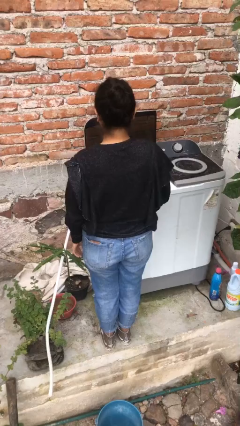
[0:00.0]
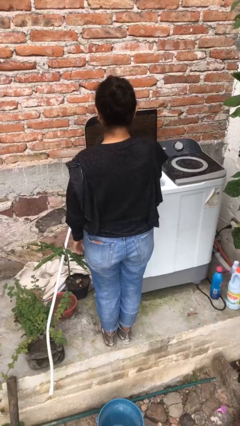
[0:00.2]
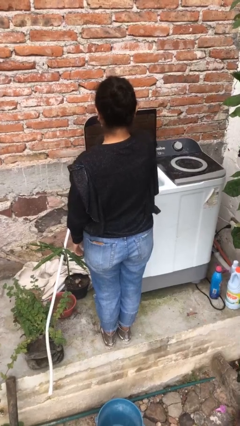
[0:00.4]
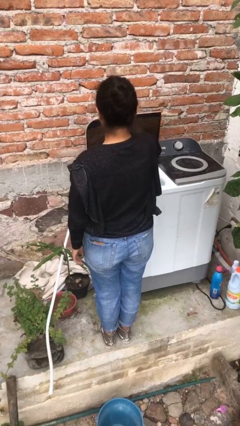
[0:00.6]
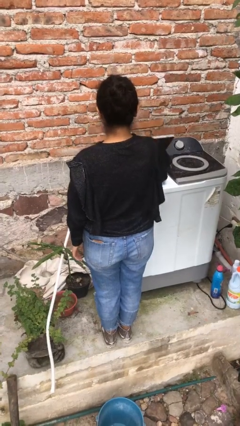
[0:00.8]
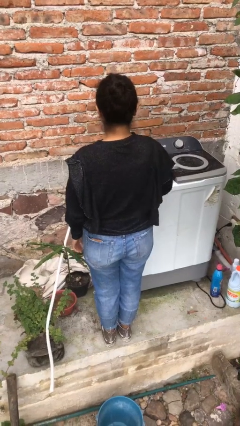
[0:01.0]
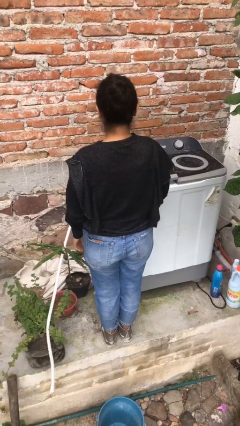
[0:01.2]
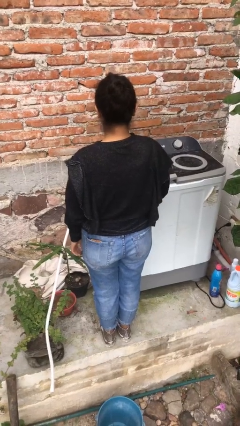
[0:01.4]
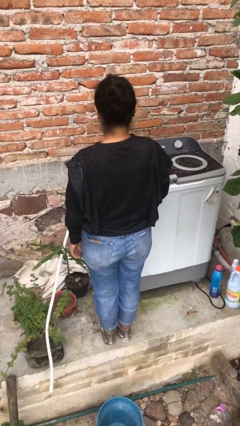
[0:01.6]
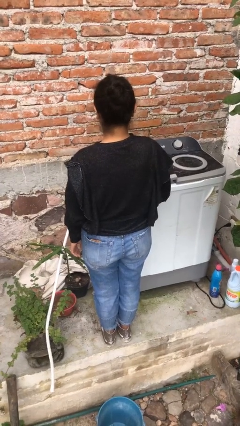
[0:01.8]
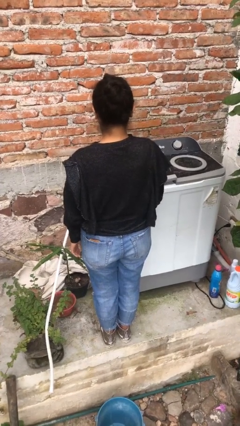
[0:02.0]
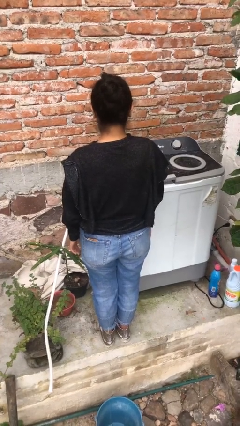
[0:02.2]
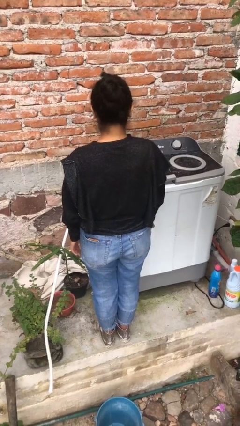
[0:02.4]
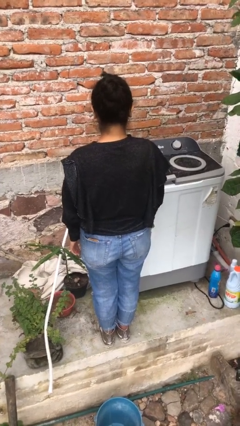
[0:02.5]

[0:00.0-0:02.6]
person closes clothes washer

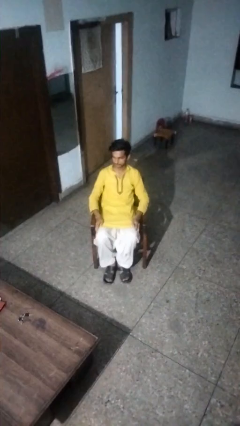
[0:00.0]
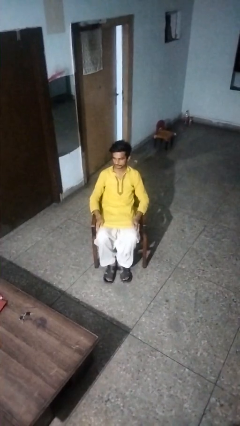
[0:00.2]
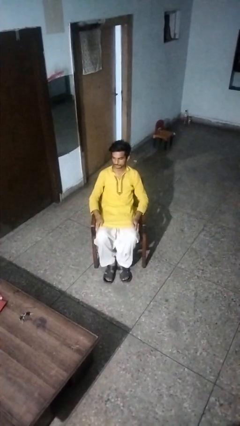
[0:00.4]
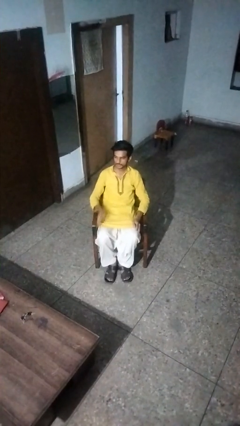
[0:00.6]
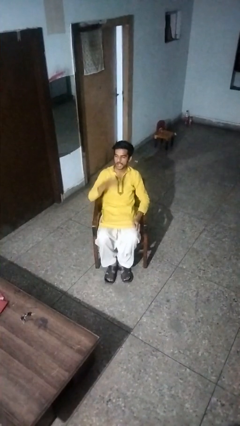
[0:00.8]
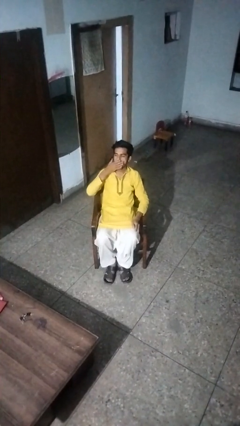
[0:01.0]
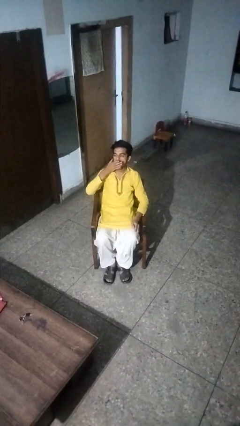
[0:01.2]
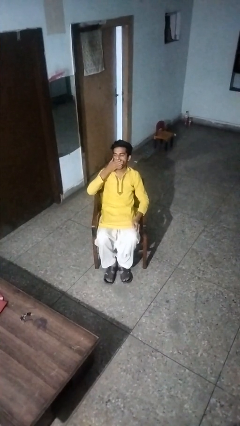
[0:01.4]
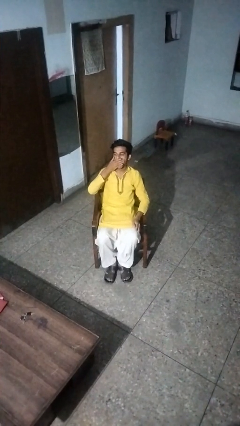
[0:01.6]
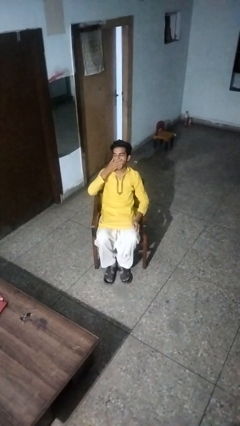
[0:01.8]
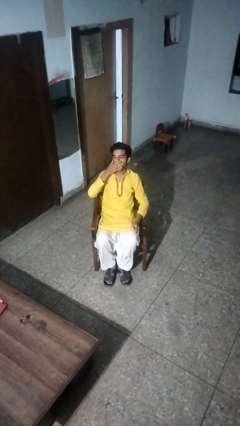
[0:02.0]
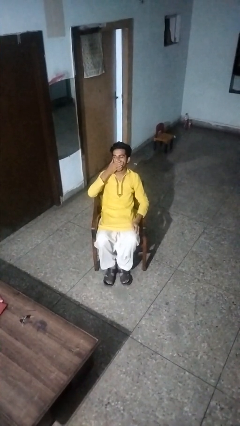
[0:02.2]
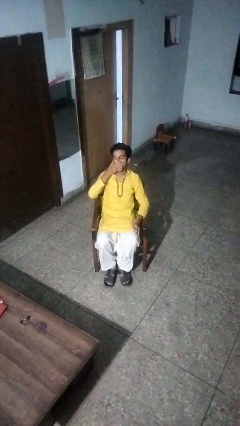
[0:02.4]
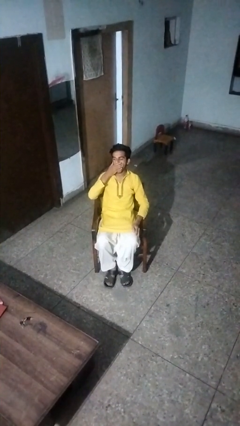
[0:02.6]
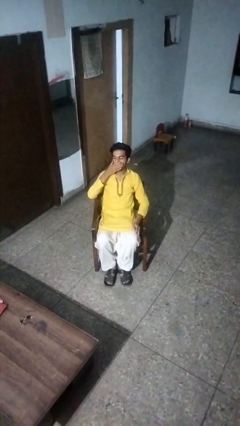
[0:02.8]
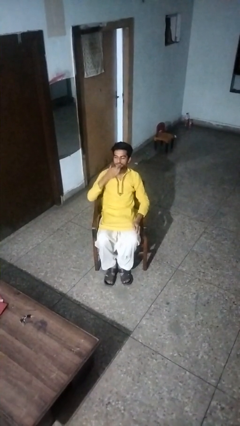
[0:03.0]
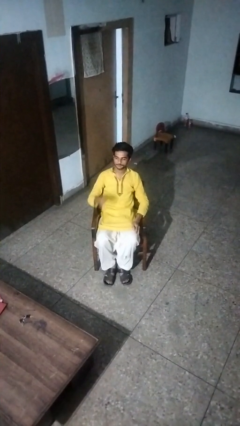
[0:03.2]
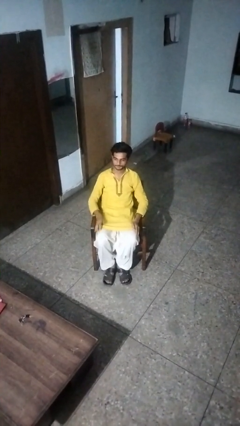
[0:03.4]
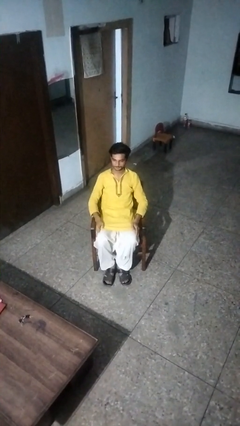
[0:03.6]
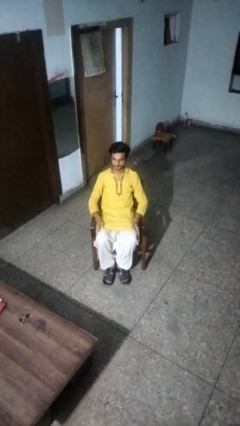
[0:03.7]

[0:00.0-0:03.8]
person yawns

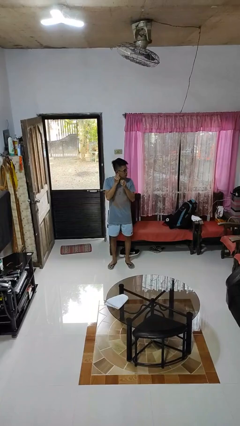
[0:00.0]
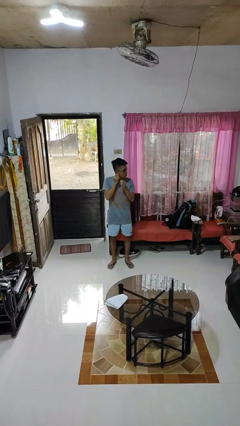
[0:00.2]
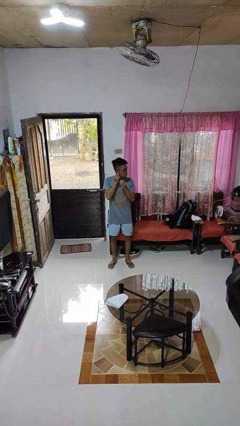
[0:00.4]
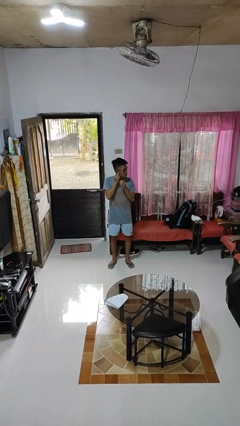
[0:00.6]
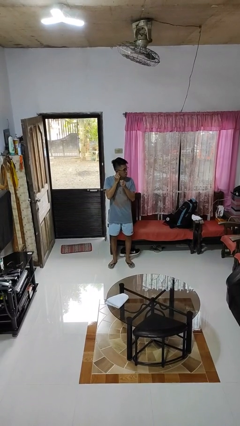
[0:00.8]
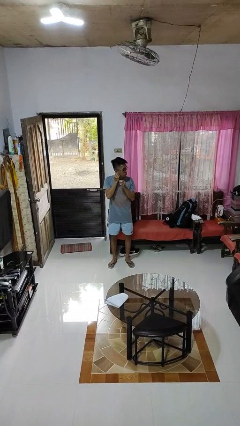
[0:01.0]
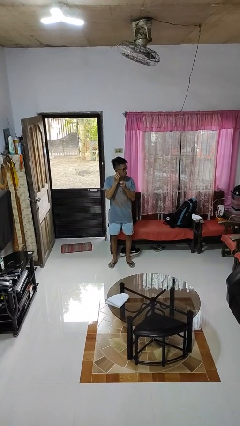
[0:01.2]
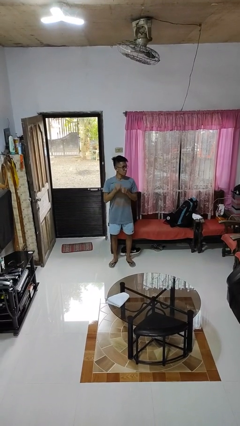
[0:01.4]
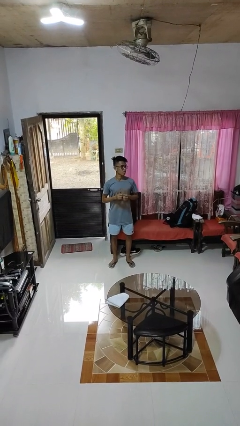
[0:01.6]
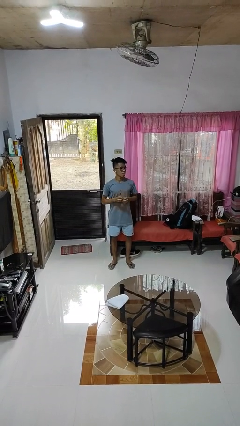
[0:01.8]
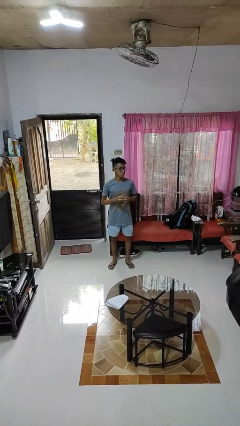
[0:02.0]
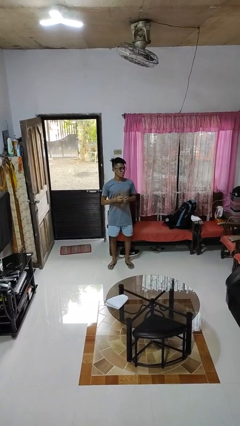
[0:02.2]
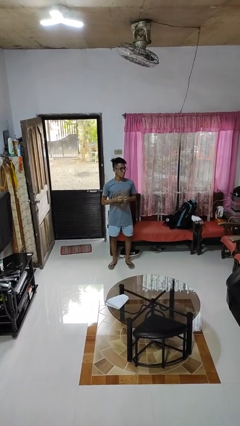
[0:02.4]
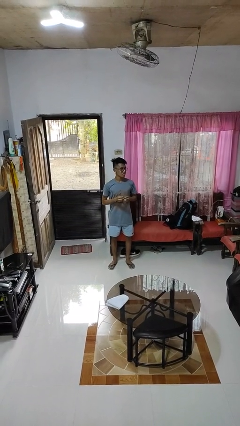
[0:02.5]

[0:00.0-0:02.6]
person puts on earrings

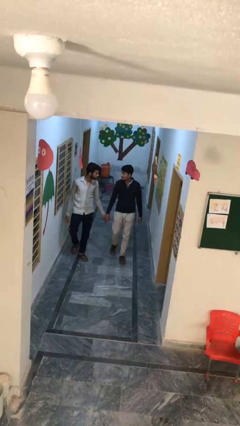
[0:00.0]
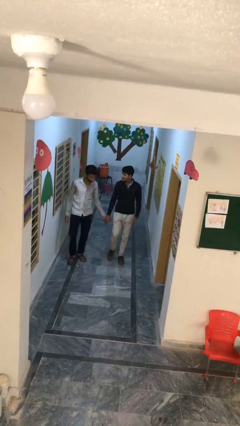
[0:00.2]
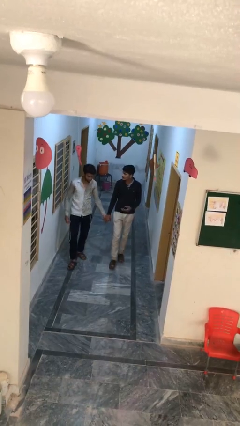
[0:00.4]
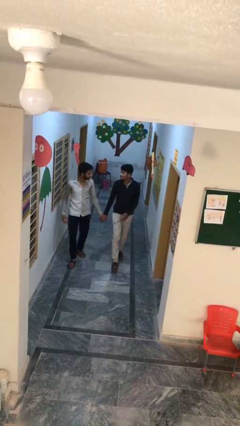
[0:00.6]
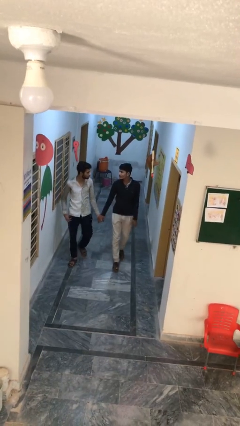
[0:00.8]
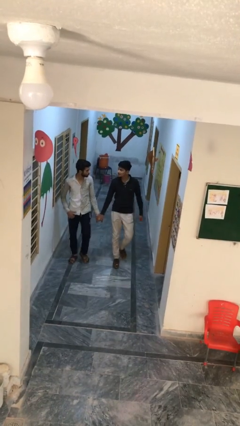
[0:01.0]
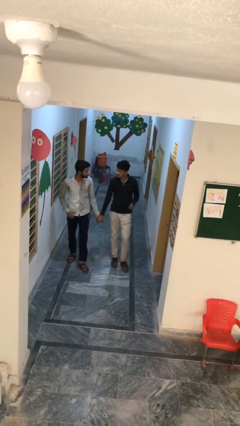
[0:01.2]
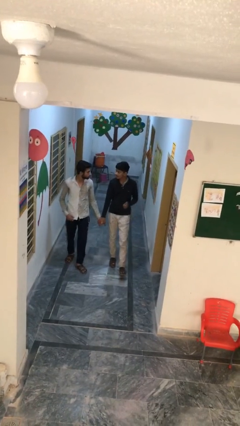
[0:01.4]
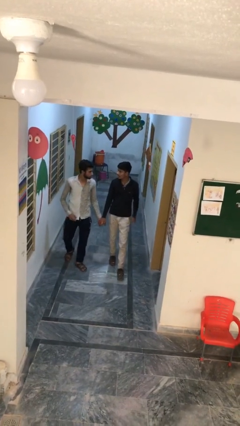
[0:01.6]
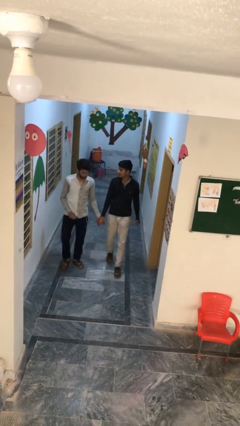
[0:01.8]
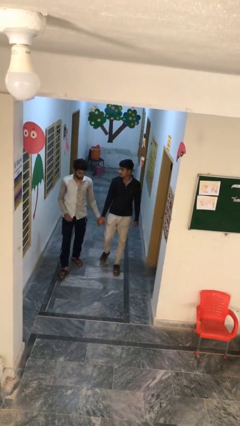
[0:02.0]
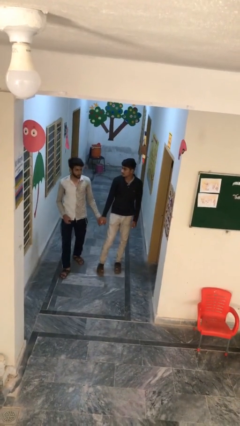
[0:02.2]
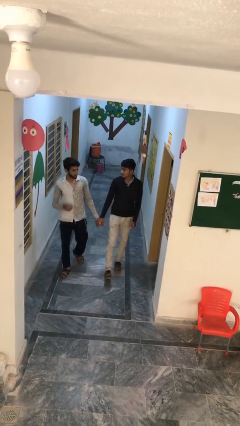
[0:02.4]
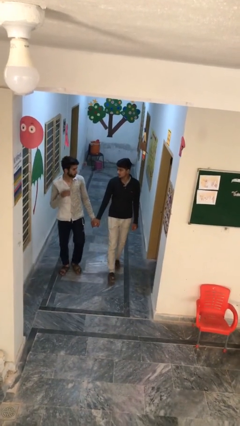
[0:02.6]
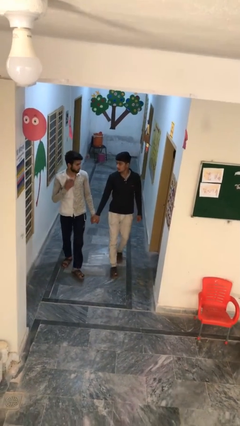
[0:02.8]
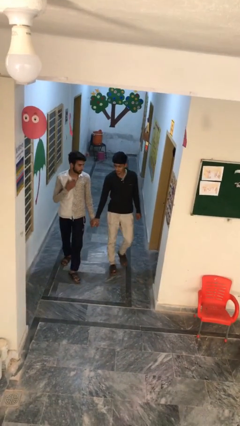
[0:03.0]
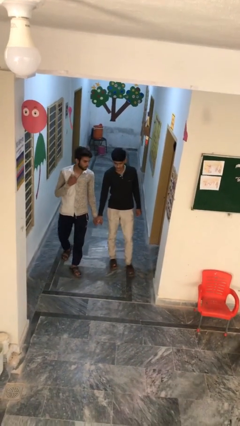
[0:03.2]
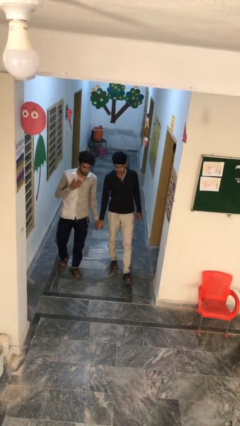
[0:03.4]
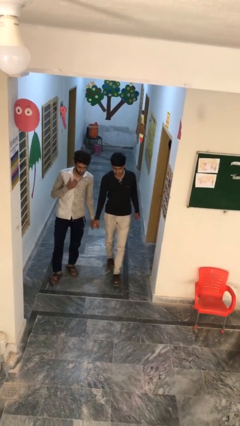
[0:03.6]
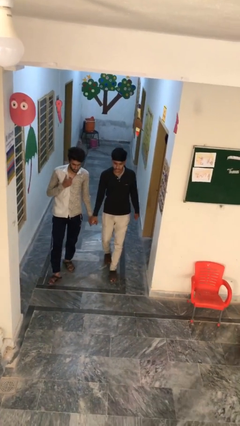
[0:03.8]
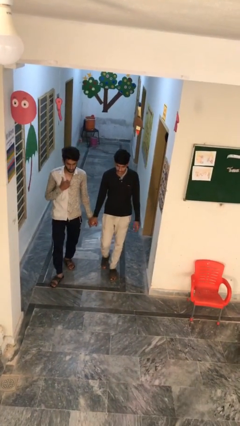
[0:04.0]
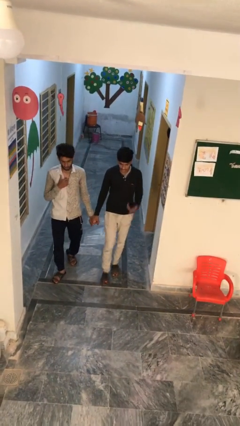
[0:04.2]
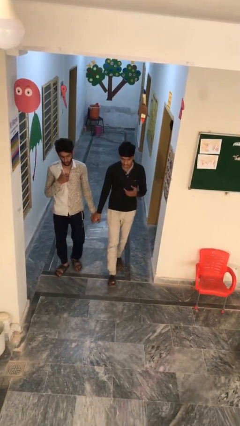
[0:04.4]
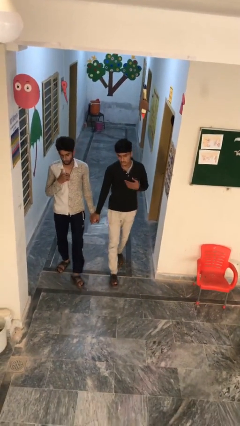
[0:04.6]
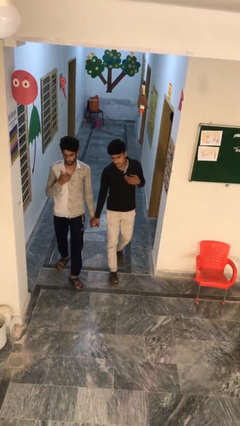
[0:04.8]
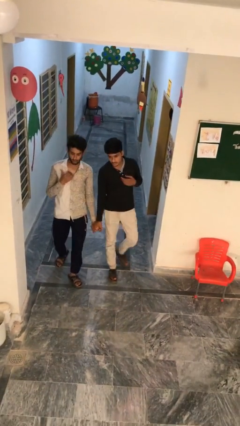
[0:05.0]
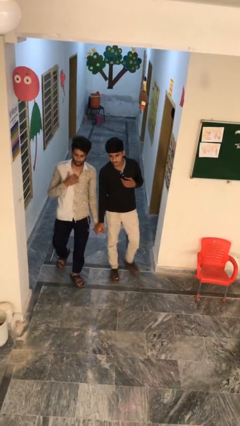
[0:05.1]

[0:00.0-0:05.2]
person holds hand

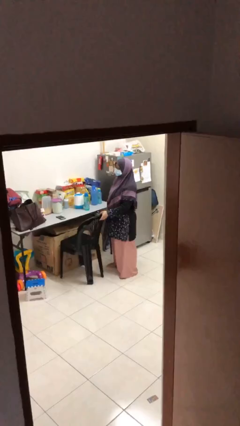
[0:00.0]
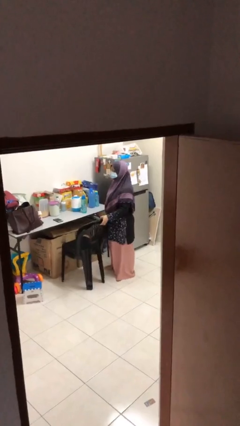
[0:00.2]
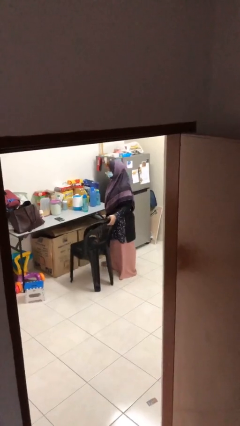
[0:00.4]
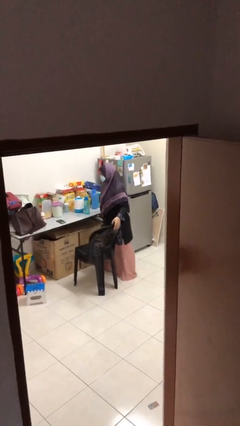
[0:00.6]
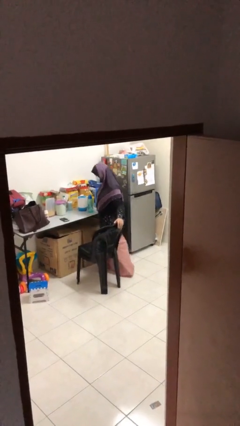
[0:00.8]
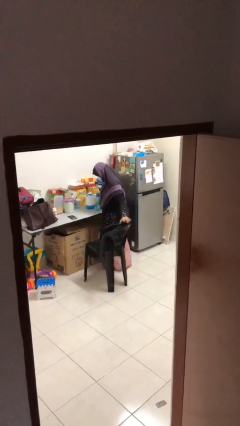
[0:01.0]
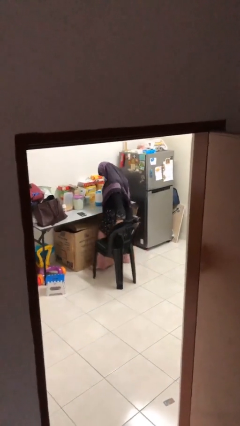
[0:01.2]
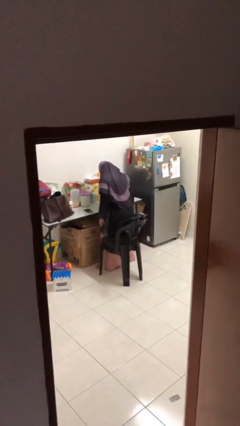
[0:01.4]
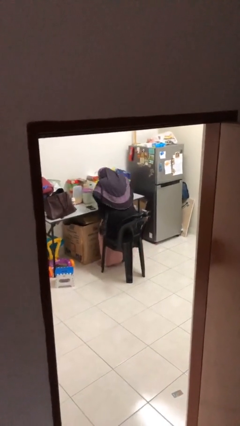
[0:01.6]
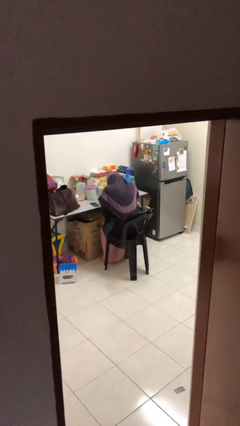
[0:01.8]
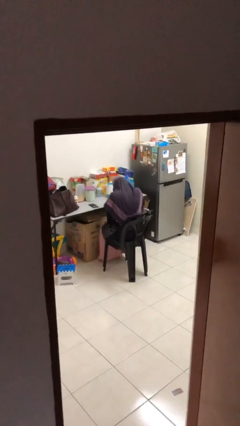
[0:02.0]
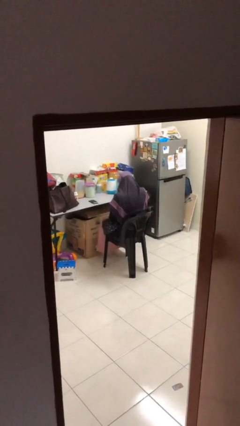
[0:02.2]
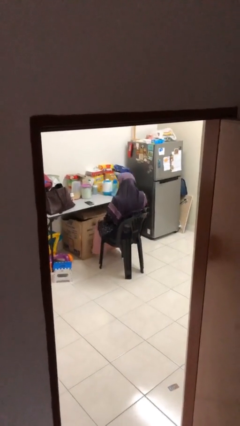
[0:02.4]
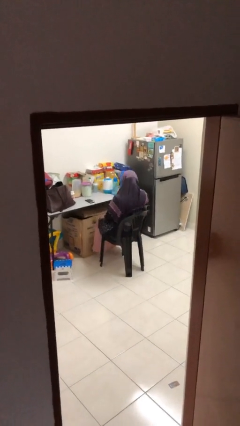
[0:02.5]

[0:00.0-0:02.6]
person sits down

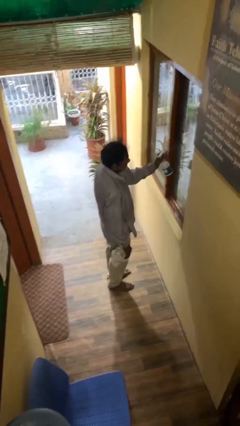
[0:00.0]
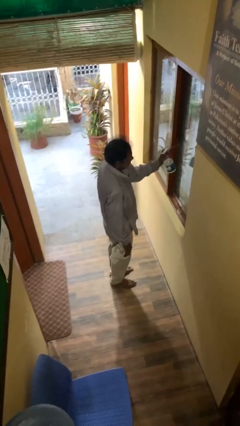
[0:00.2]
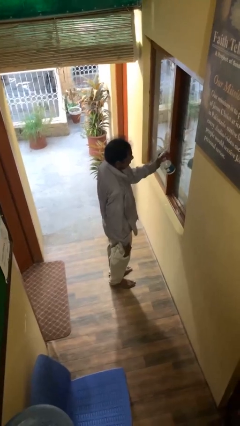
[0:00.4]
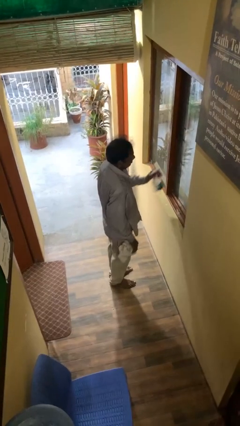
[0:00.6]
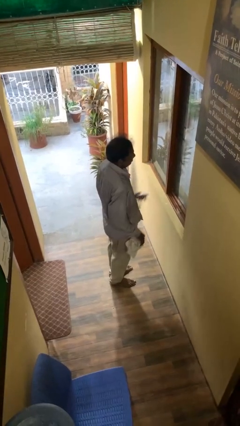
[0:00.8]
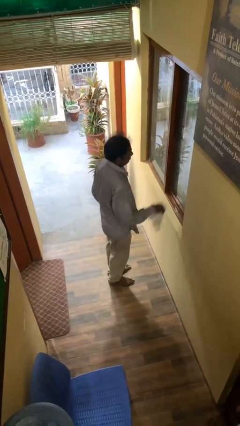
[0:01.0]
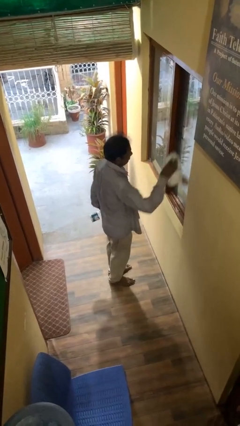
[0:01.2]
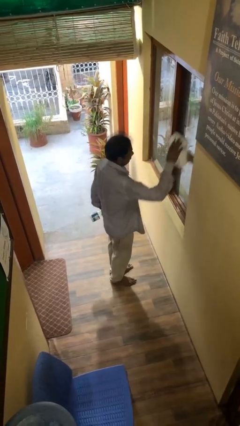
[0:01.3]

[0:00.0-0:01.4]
person sprays from bottle
